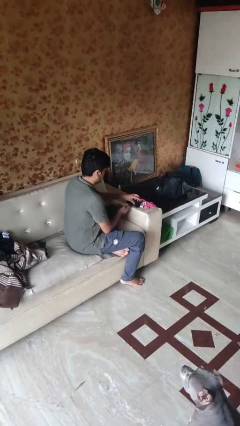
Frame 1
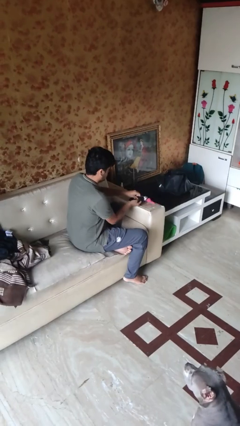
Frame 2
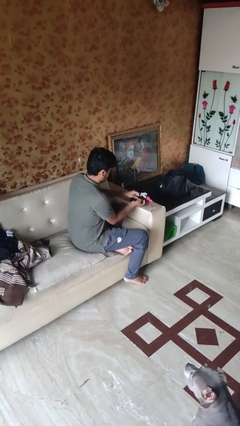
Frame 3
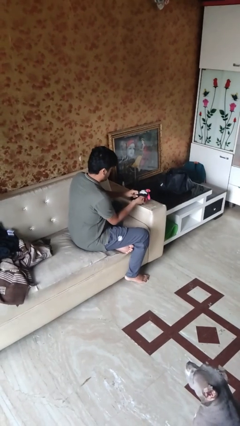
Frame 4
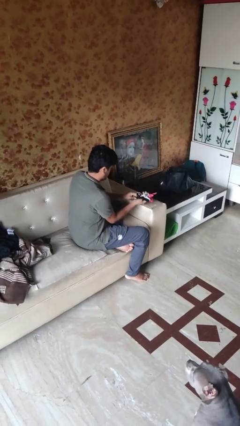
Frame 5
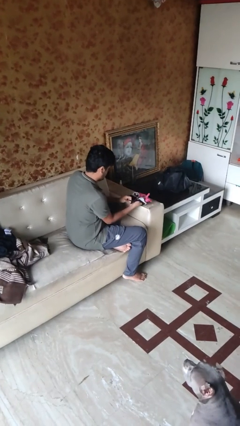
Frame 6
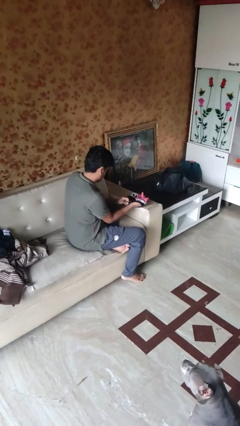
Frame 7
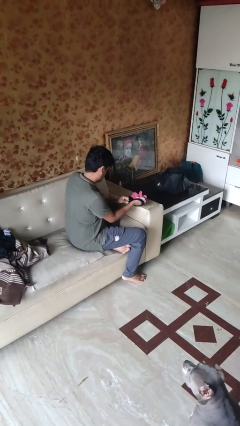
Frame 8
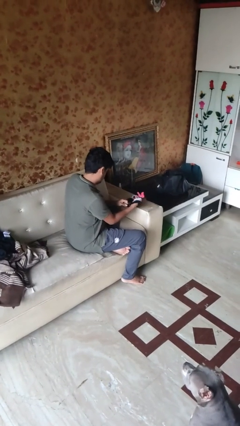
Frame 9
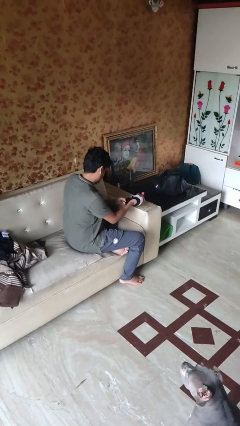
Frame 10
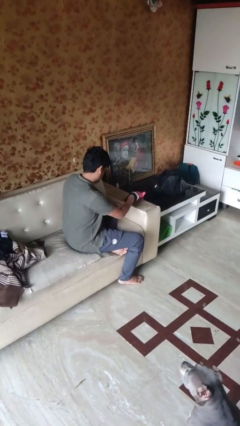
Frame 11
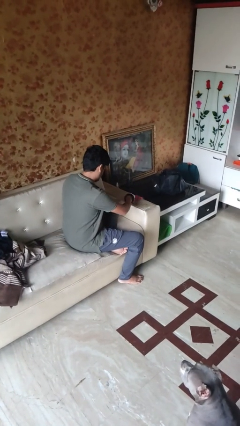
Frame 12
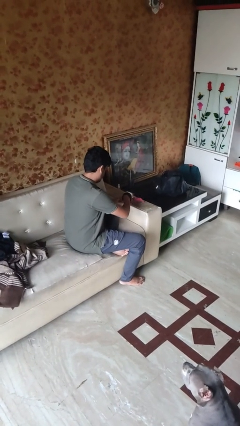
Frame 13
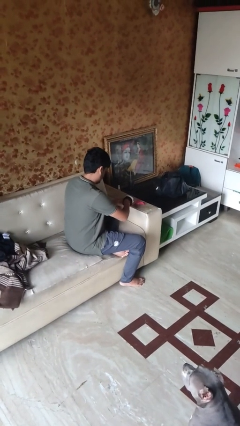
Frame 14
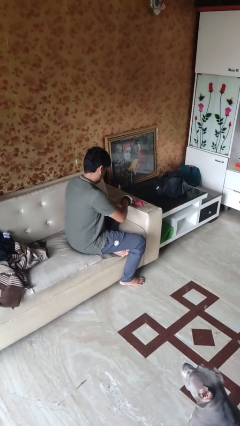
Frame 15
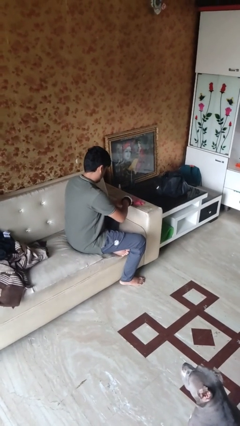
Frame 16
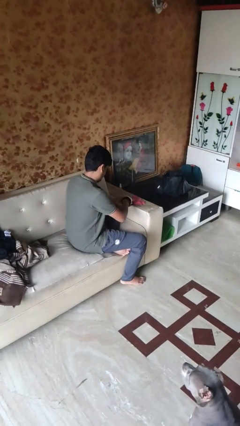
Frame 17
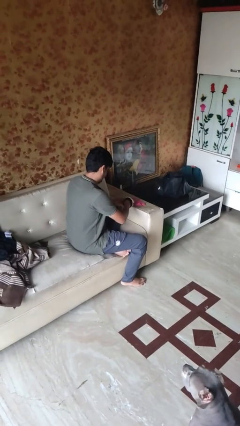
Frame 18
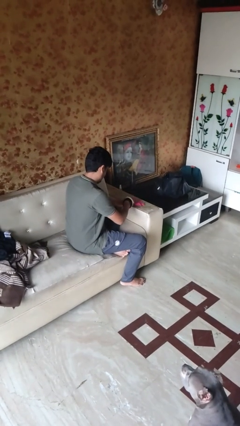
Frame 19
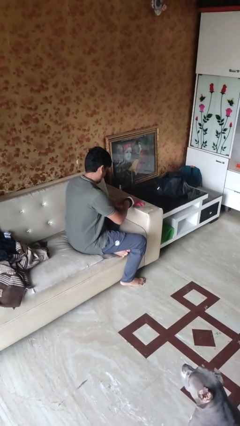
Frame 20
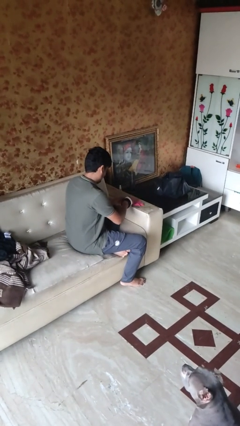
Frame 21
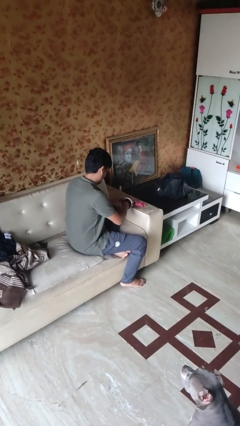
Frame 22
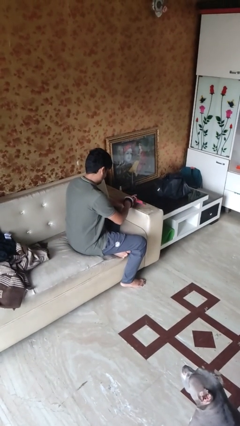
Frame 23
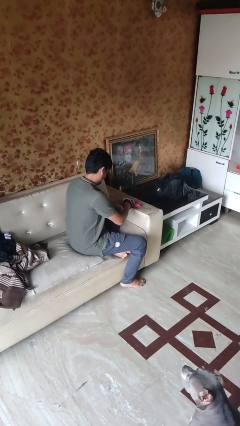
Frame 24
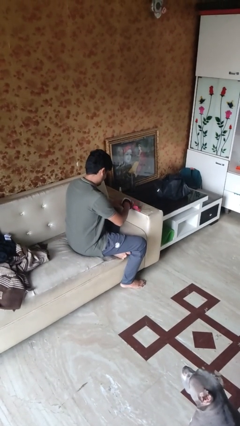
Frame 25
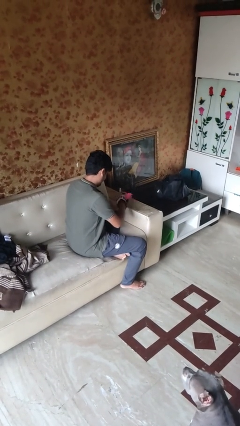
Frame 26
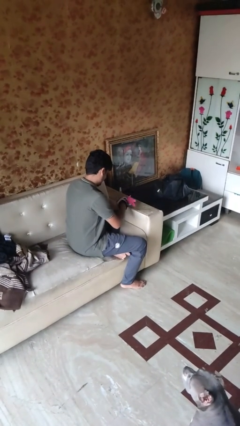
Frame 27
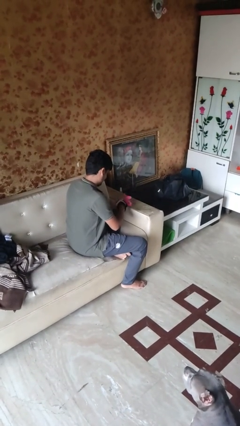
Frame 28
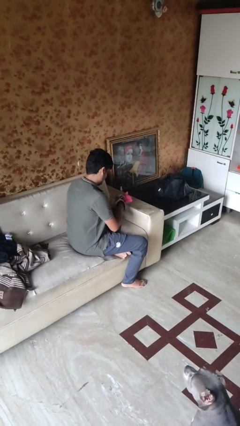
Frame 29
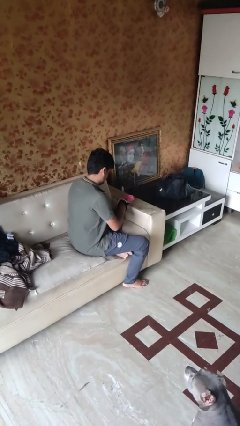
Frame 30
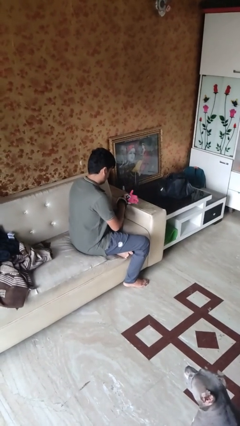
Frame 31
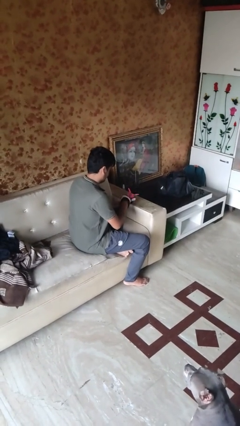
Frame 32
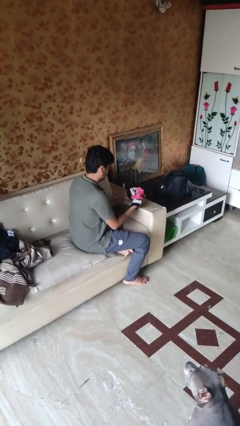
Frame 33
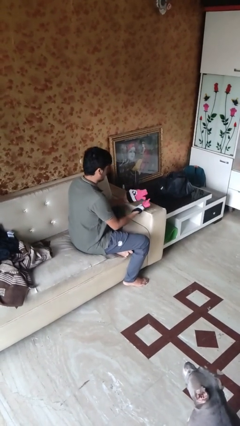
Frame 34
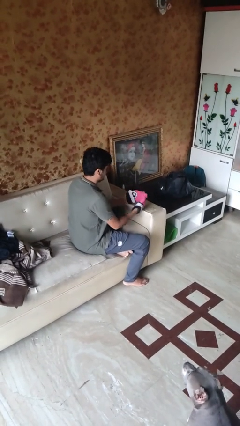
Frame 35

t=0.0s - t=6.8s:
person puts on gloves

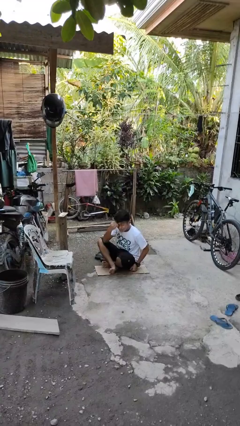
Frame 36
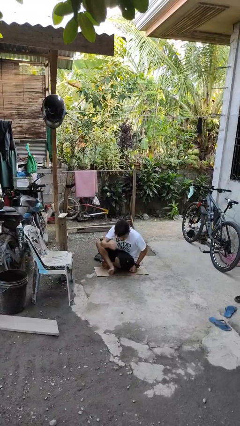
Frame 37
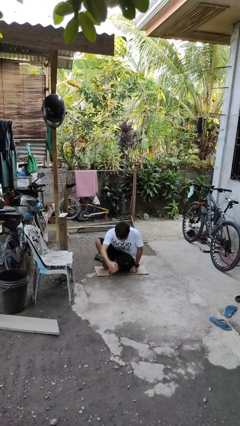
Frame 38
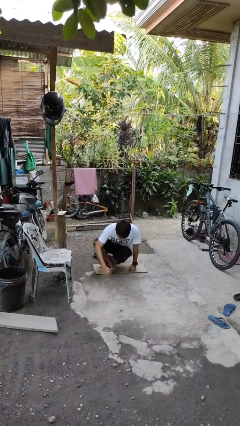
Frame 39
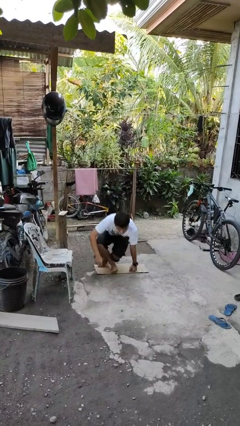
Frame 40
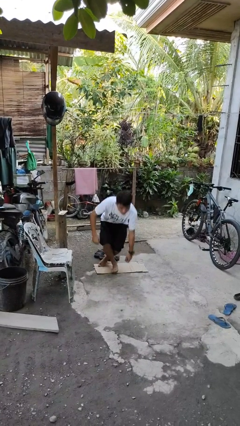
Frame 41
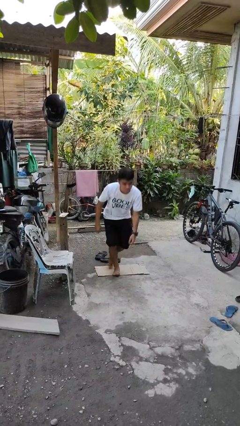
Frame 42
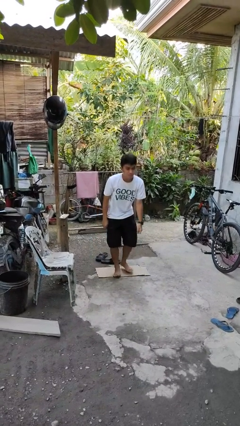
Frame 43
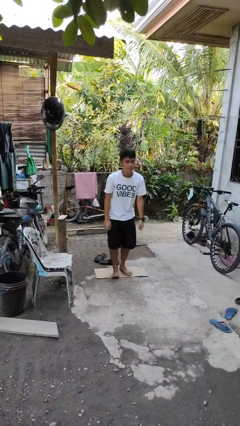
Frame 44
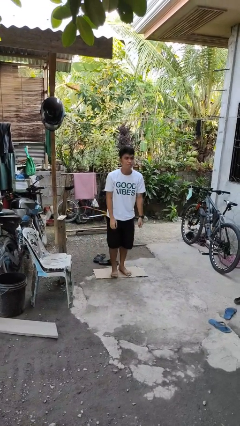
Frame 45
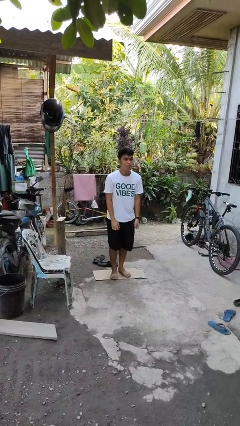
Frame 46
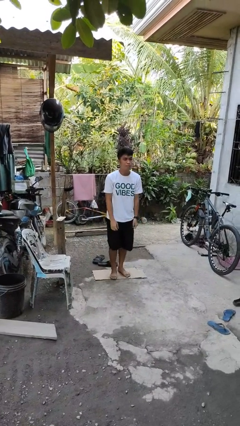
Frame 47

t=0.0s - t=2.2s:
person stands up from floor

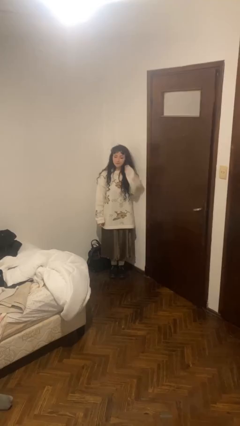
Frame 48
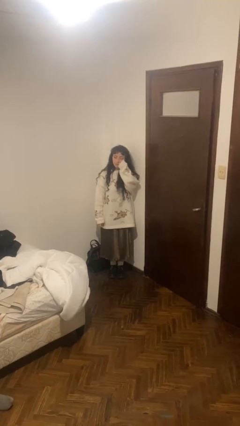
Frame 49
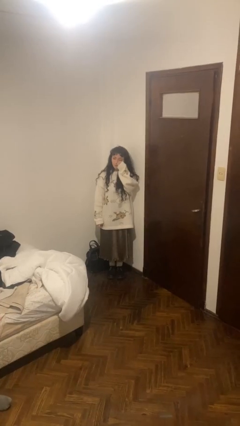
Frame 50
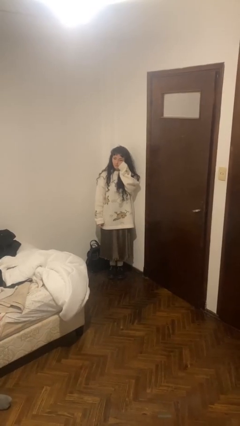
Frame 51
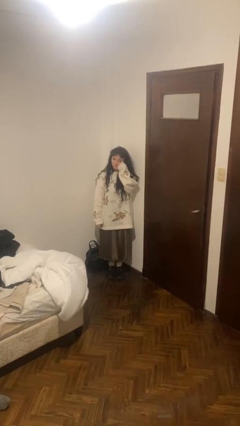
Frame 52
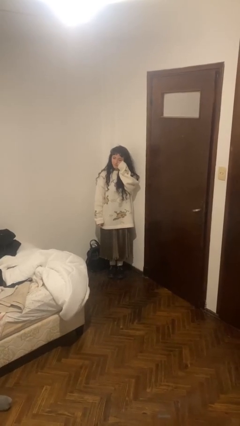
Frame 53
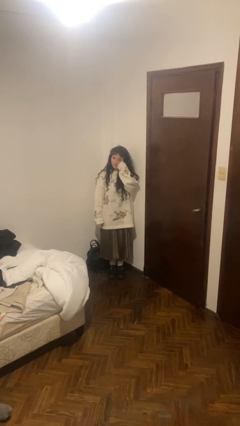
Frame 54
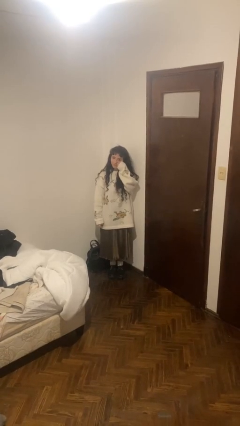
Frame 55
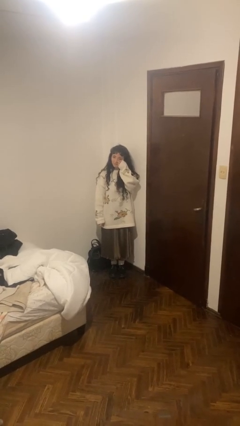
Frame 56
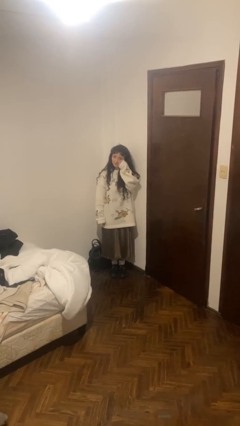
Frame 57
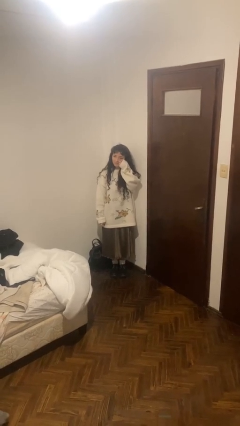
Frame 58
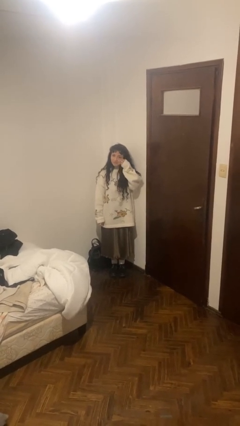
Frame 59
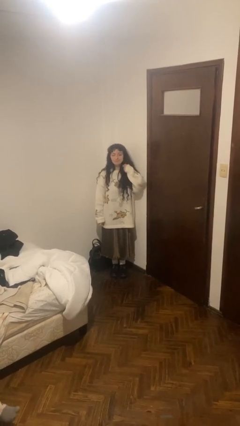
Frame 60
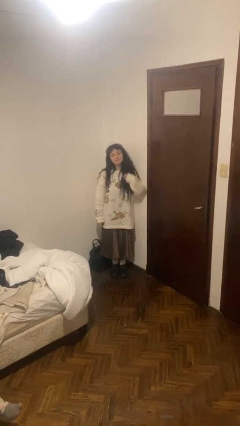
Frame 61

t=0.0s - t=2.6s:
person scratches face

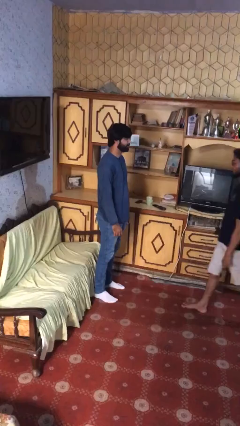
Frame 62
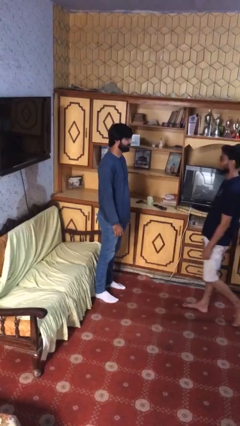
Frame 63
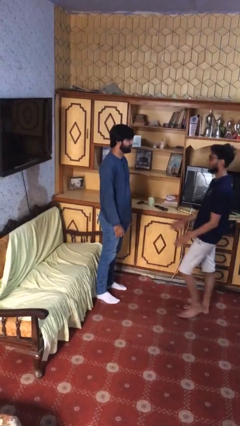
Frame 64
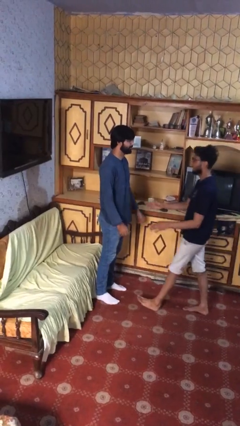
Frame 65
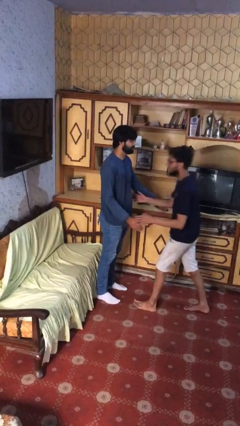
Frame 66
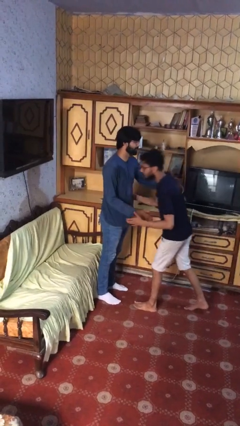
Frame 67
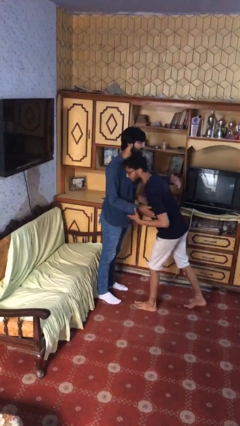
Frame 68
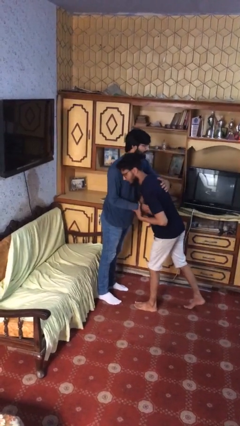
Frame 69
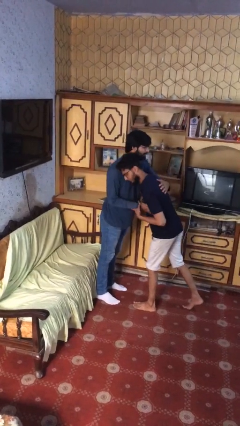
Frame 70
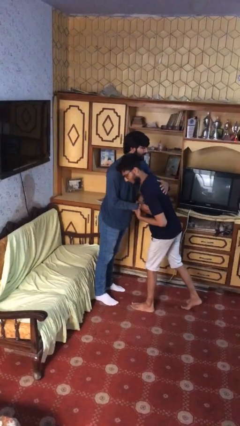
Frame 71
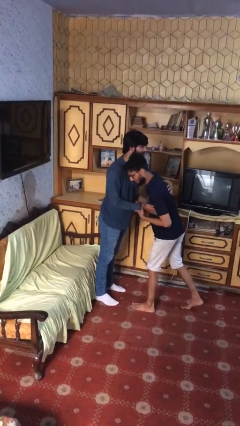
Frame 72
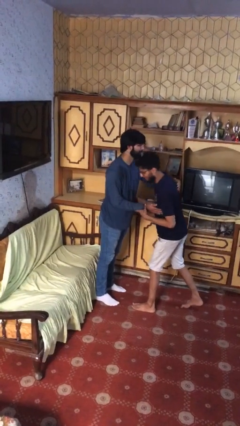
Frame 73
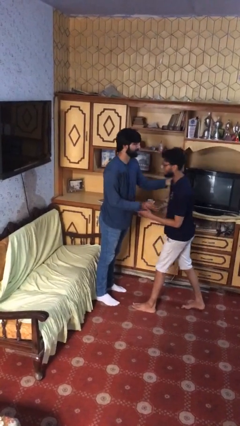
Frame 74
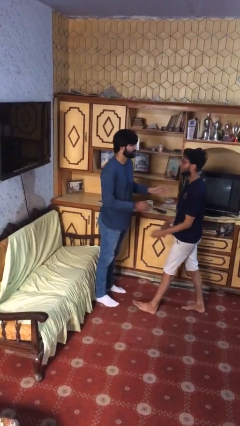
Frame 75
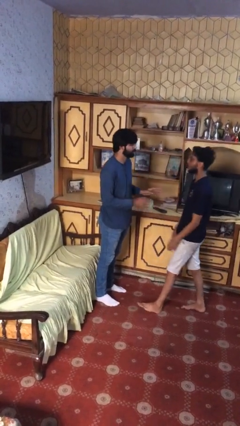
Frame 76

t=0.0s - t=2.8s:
person embraces person

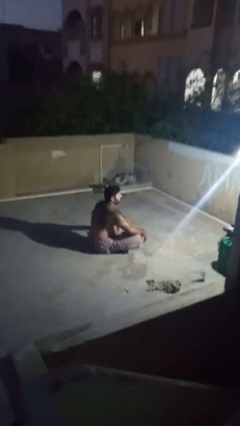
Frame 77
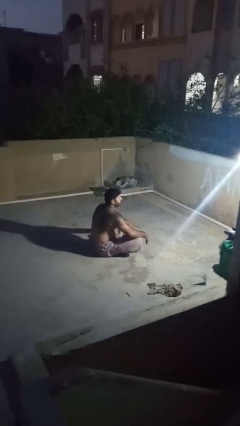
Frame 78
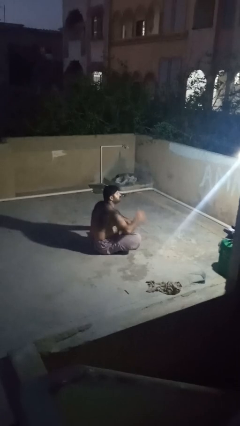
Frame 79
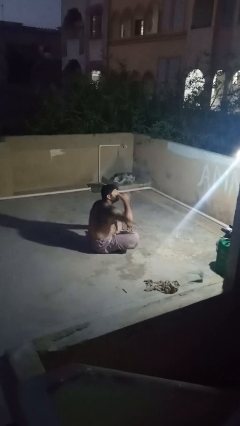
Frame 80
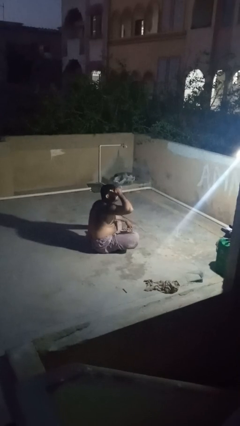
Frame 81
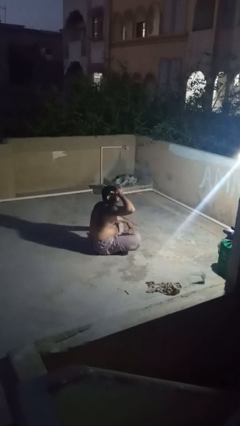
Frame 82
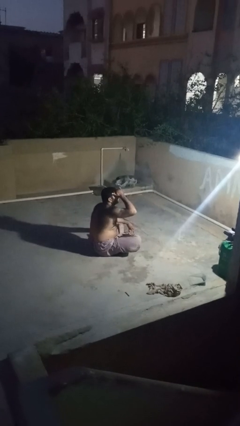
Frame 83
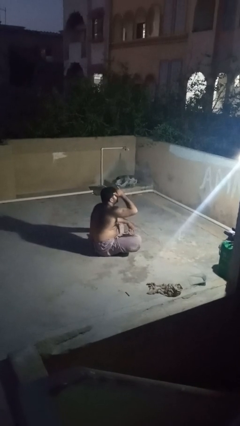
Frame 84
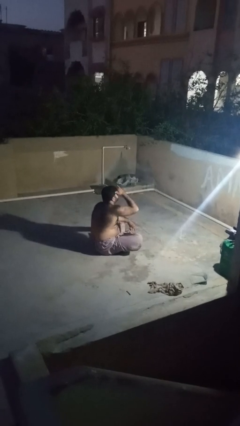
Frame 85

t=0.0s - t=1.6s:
person shades eyes

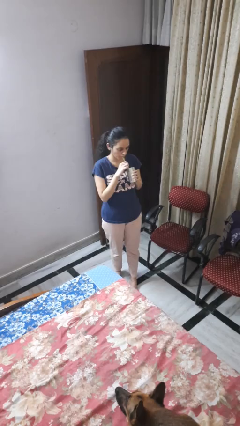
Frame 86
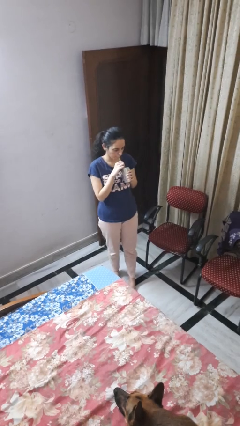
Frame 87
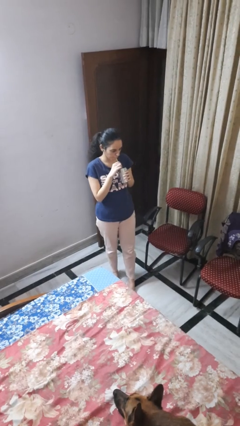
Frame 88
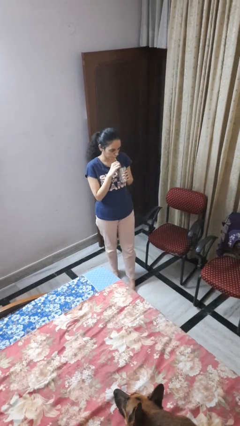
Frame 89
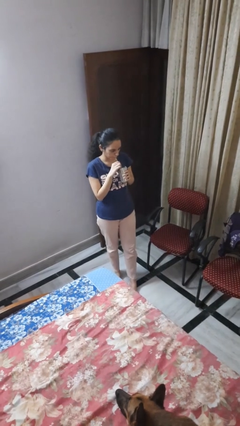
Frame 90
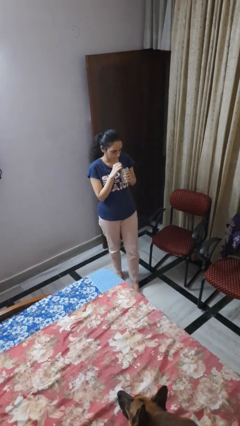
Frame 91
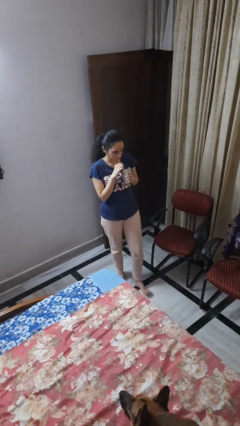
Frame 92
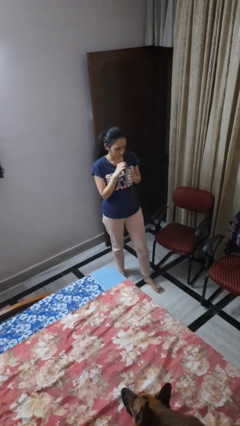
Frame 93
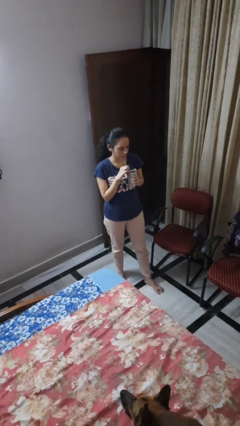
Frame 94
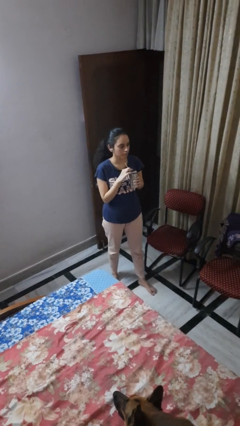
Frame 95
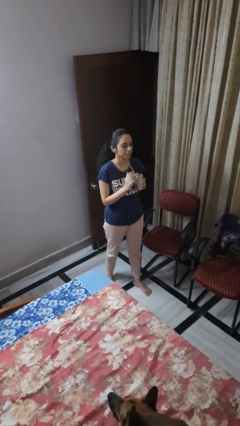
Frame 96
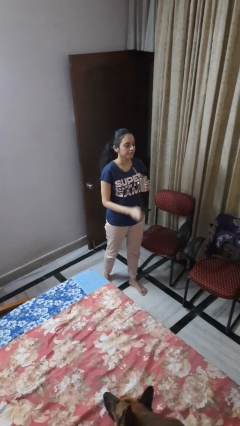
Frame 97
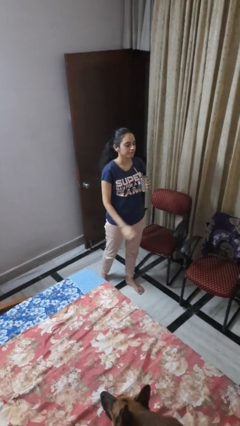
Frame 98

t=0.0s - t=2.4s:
person drinks from straw
